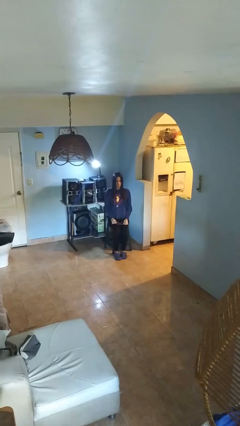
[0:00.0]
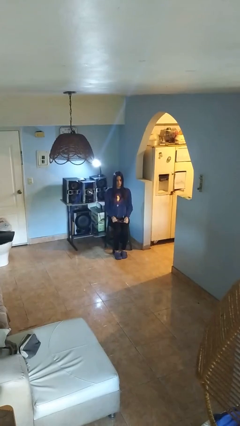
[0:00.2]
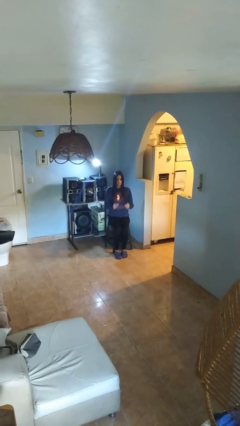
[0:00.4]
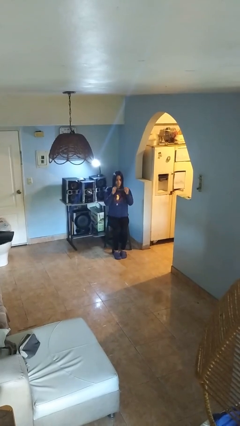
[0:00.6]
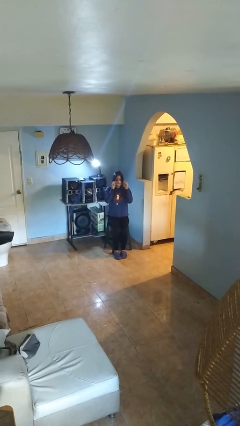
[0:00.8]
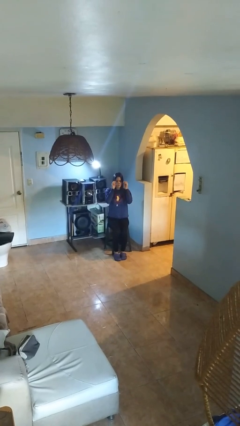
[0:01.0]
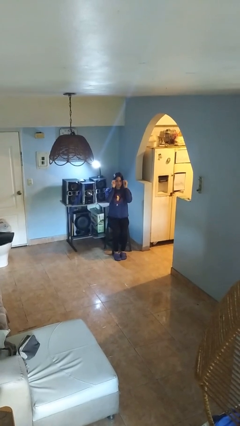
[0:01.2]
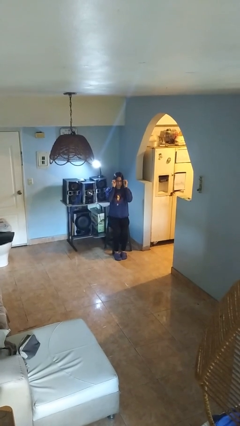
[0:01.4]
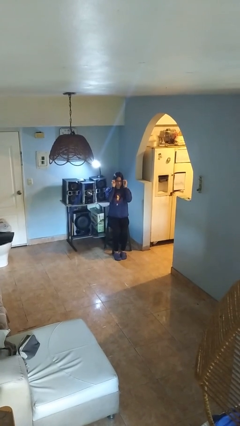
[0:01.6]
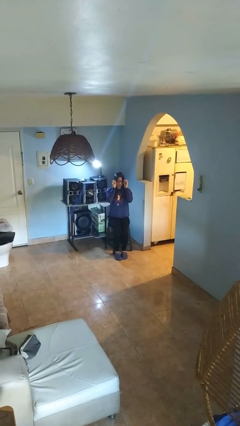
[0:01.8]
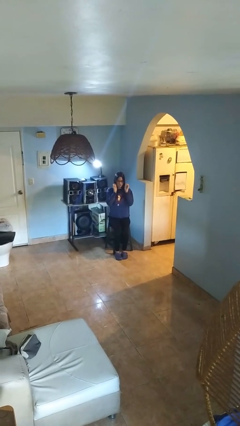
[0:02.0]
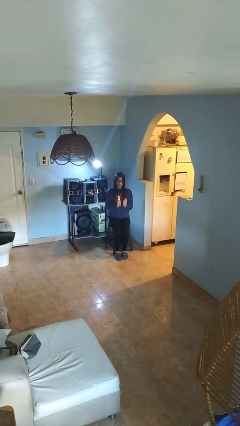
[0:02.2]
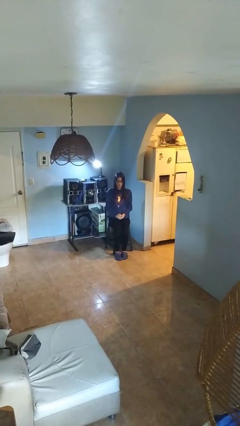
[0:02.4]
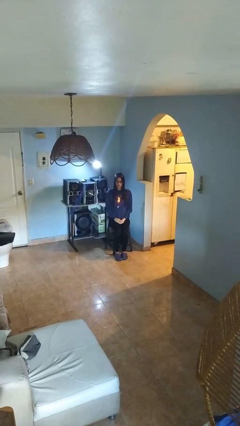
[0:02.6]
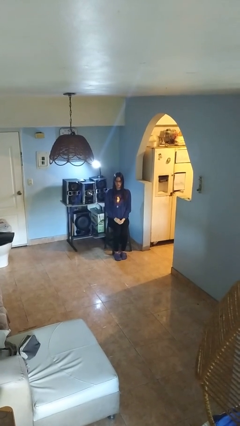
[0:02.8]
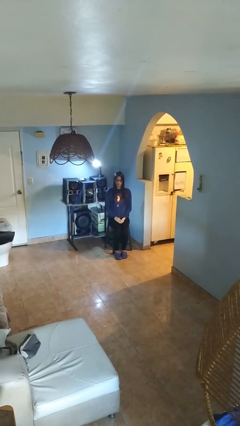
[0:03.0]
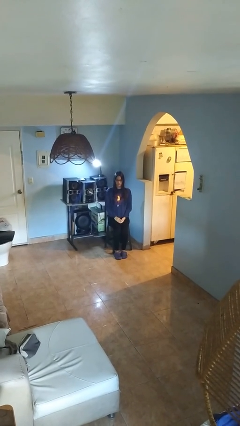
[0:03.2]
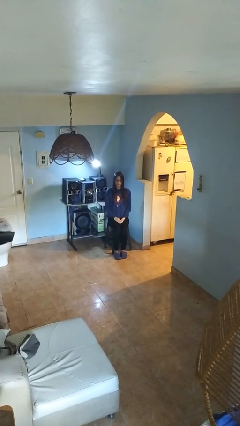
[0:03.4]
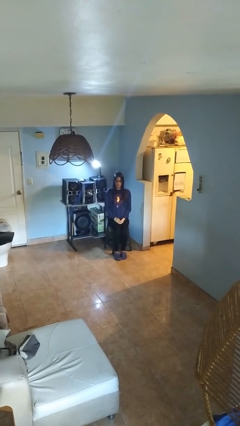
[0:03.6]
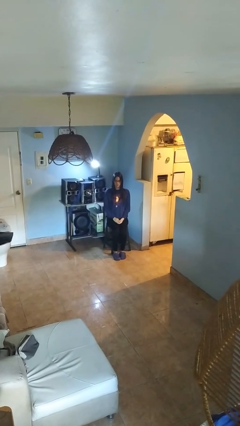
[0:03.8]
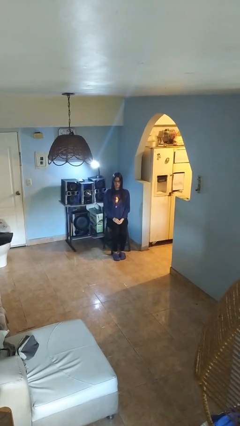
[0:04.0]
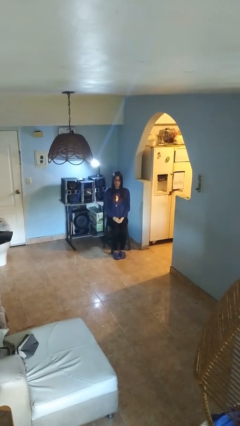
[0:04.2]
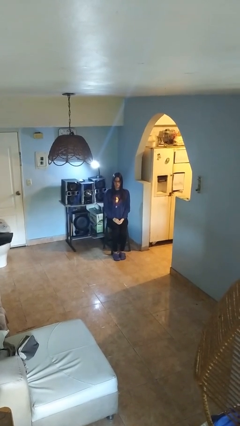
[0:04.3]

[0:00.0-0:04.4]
person puts on glasses

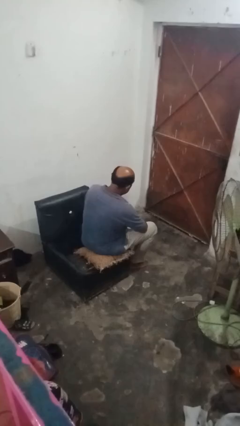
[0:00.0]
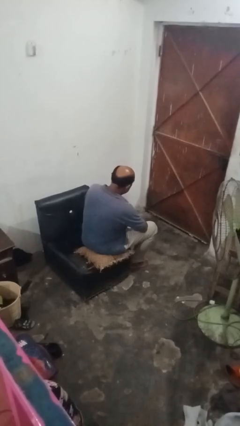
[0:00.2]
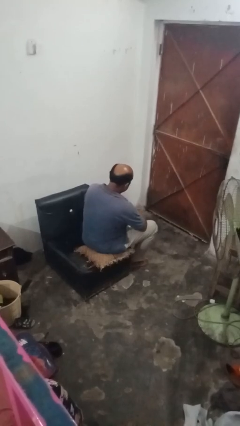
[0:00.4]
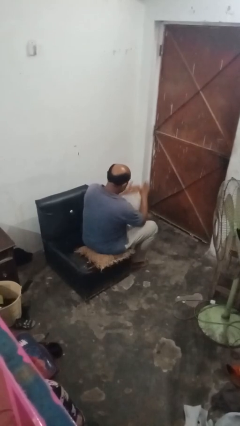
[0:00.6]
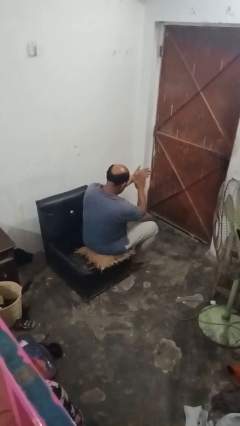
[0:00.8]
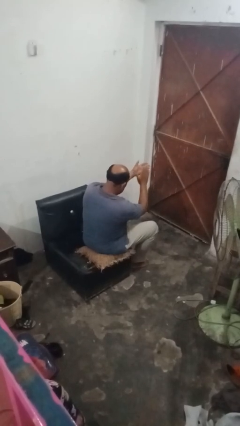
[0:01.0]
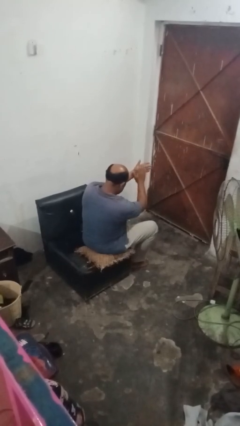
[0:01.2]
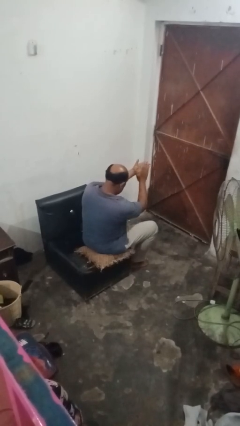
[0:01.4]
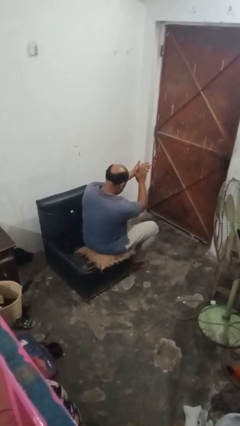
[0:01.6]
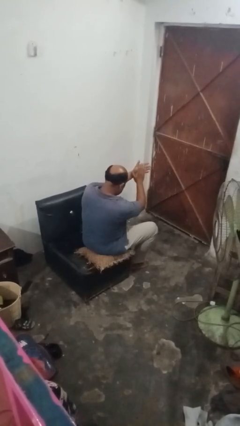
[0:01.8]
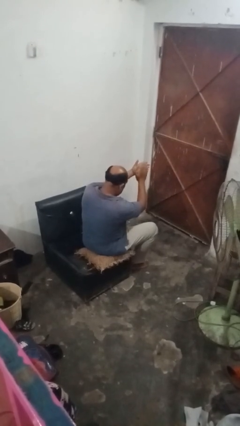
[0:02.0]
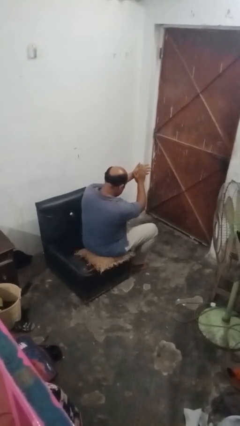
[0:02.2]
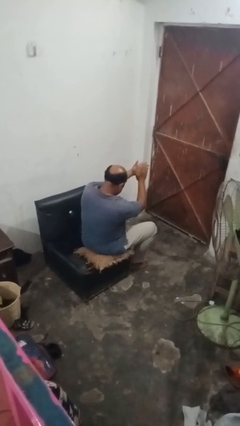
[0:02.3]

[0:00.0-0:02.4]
person claps hands

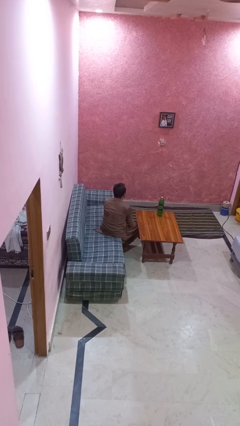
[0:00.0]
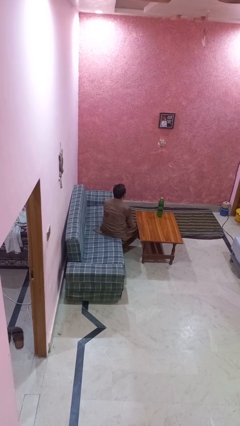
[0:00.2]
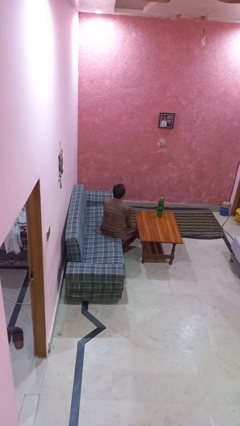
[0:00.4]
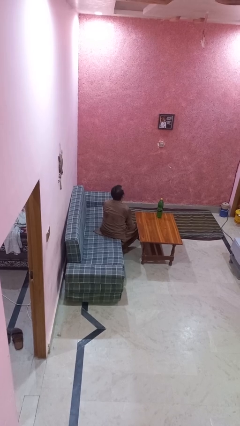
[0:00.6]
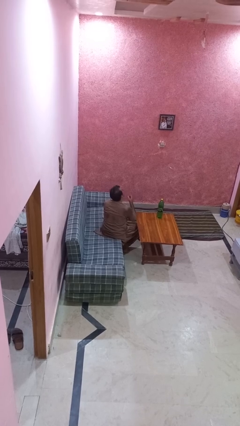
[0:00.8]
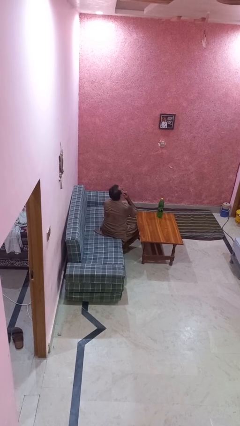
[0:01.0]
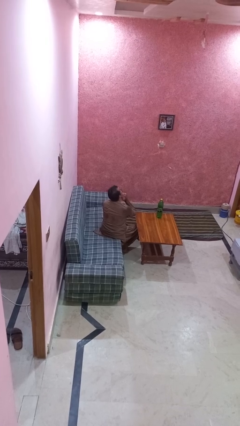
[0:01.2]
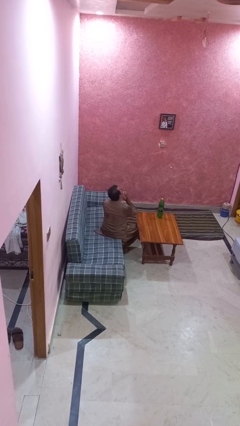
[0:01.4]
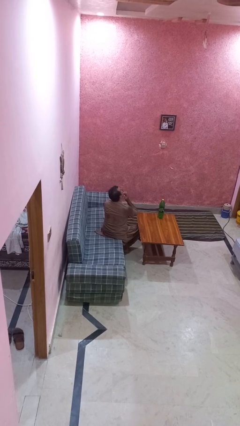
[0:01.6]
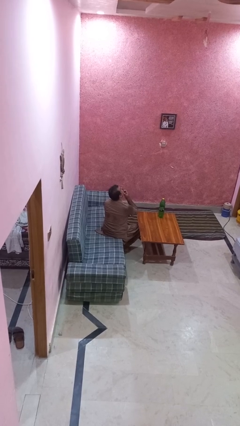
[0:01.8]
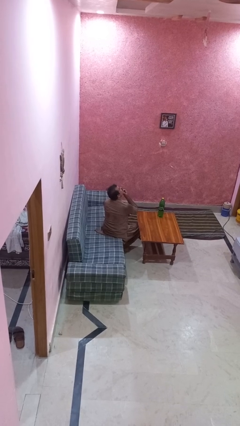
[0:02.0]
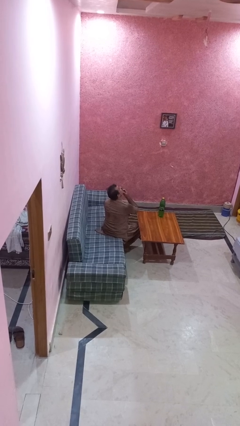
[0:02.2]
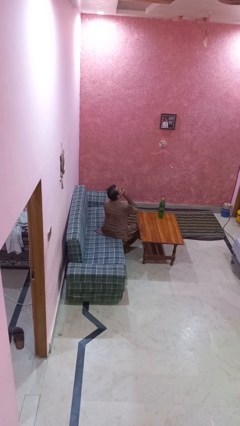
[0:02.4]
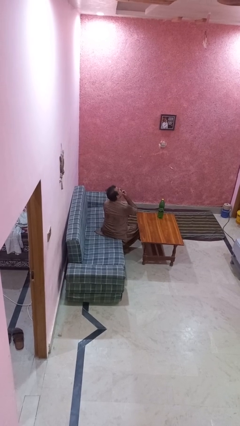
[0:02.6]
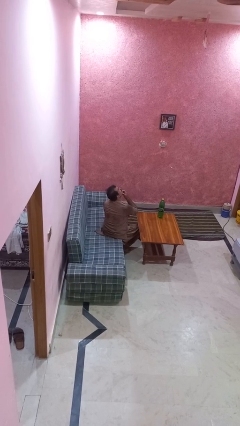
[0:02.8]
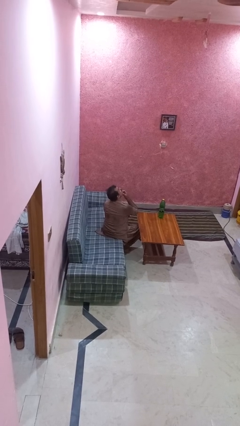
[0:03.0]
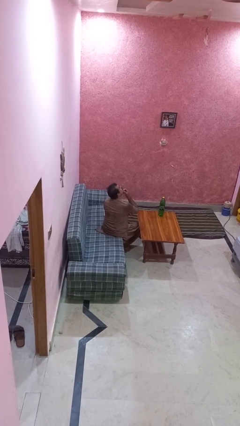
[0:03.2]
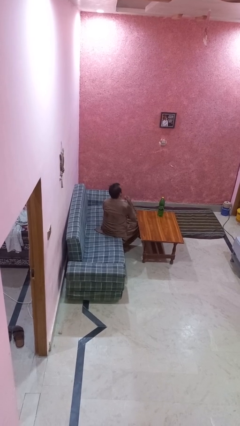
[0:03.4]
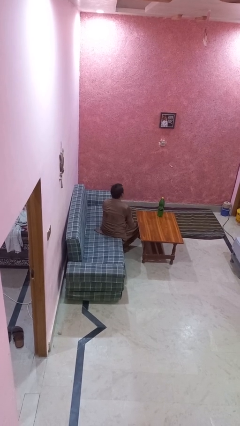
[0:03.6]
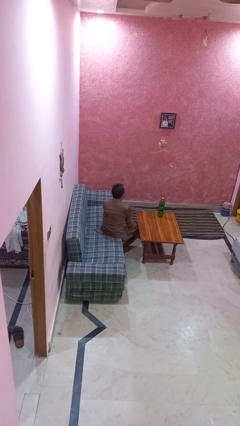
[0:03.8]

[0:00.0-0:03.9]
person strokes chin

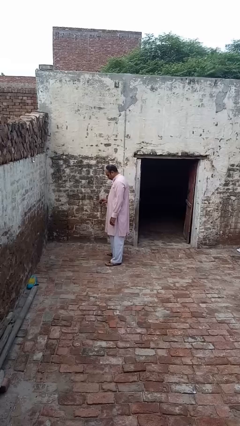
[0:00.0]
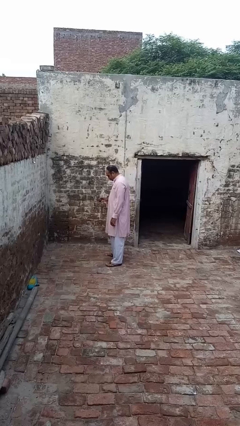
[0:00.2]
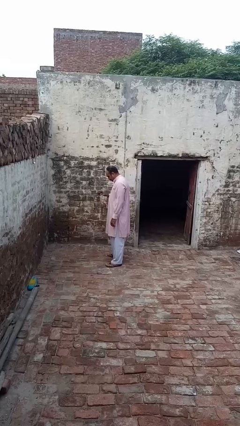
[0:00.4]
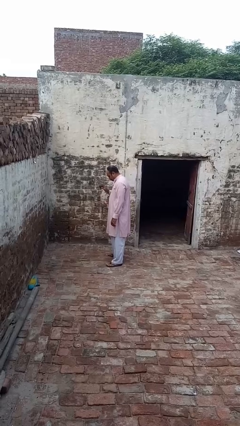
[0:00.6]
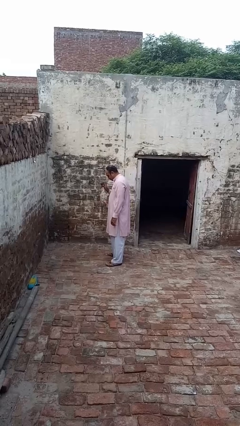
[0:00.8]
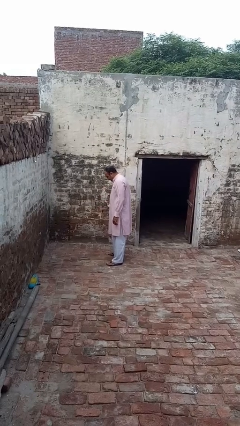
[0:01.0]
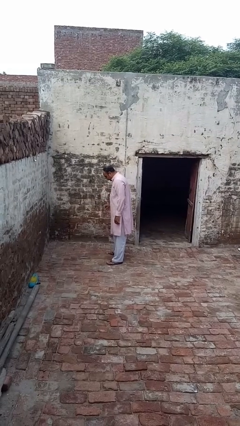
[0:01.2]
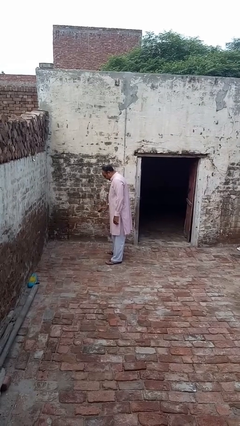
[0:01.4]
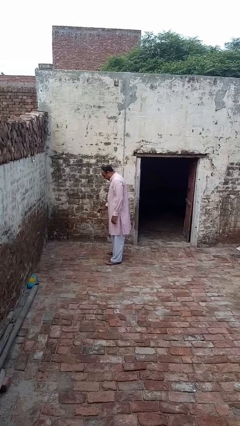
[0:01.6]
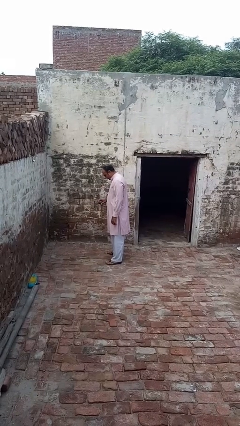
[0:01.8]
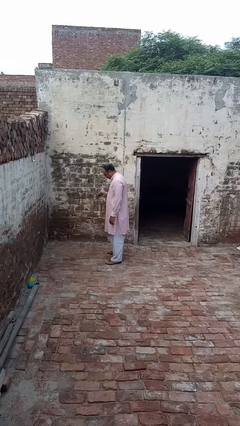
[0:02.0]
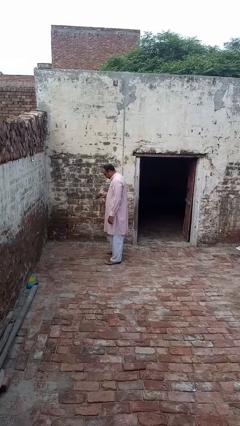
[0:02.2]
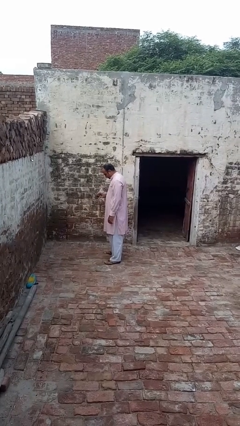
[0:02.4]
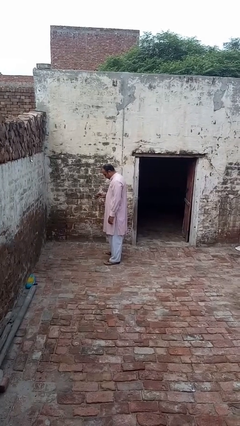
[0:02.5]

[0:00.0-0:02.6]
person bounces ball on floor

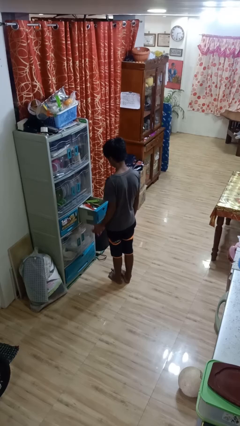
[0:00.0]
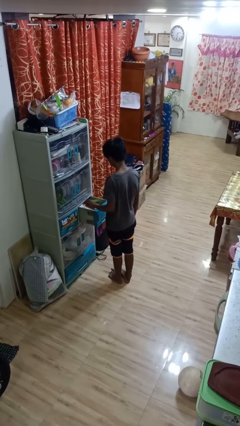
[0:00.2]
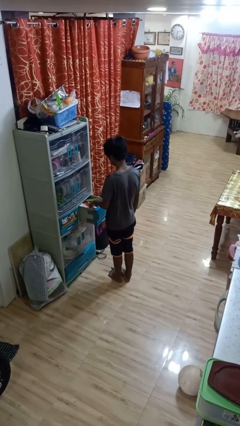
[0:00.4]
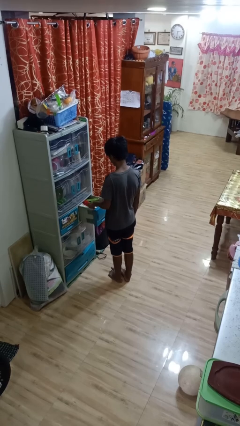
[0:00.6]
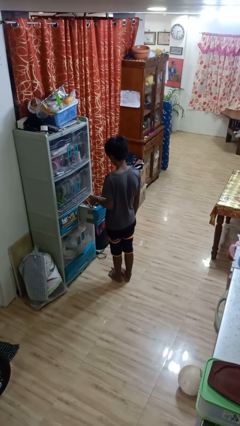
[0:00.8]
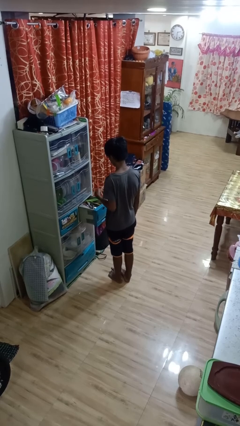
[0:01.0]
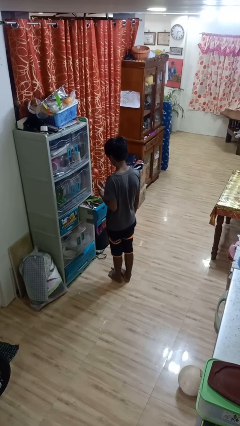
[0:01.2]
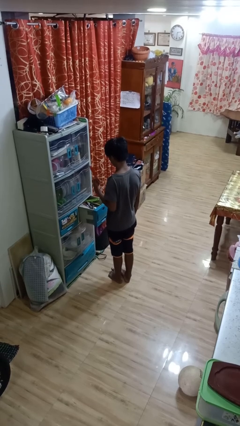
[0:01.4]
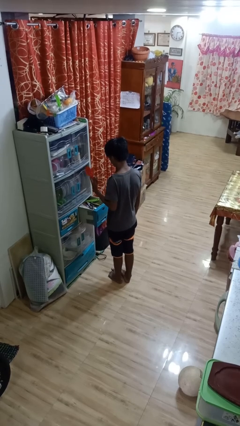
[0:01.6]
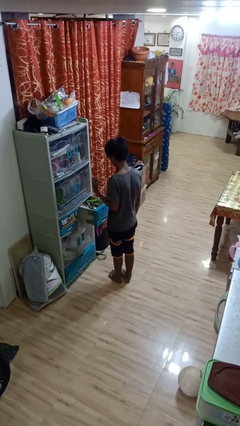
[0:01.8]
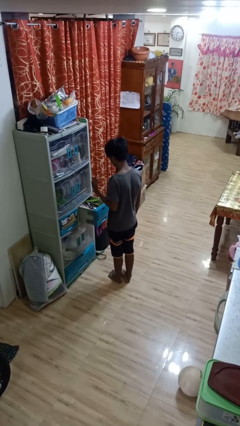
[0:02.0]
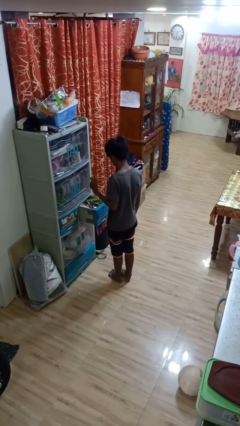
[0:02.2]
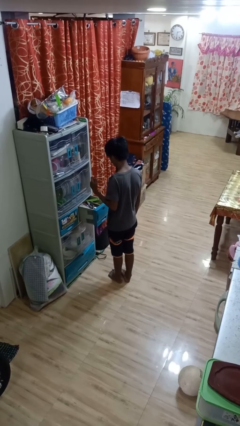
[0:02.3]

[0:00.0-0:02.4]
person takes object from kitchen drawer

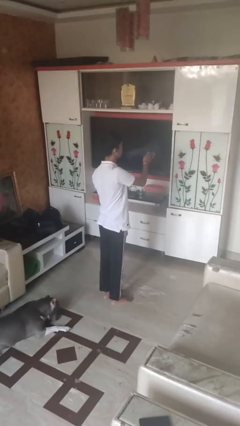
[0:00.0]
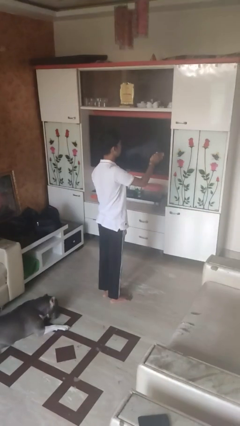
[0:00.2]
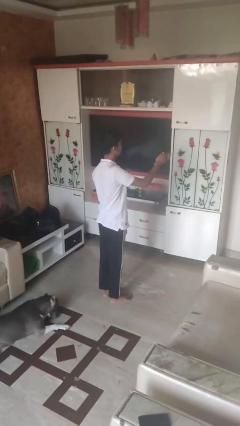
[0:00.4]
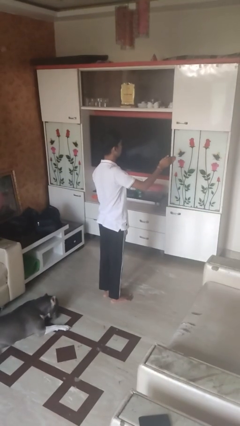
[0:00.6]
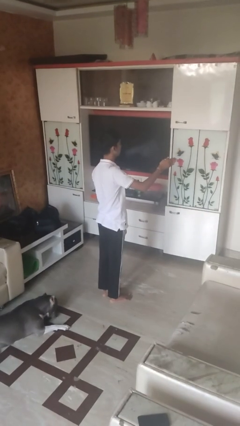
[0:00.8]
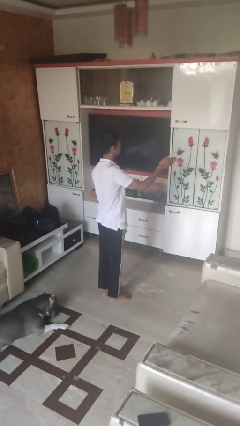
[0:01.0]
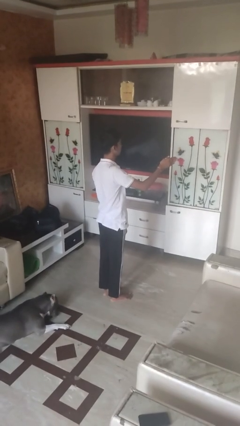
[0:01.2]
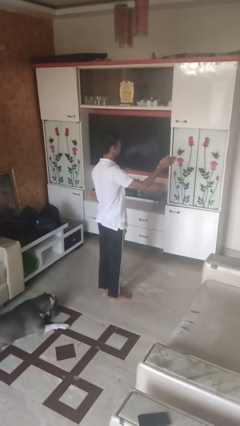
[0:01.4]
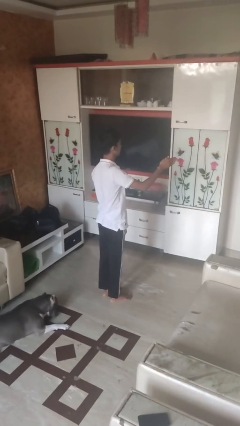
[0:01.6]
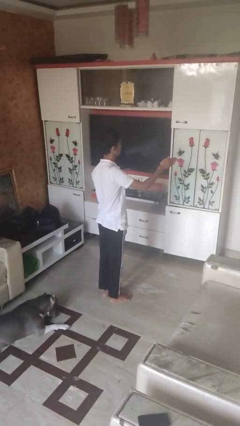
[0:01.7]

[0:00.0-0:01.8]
person gestures swipe right
